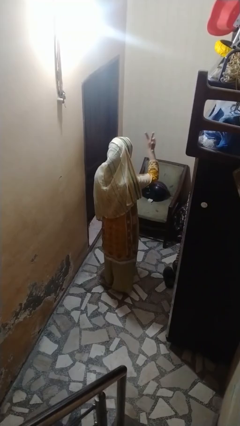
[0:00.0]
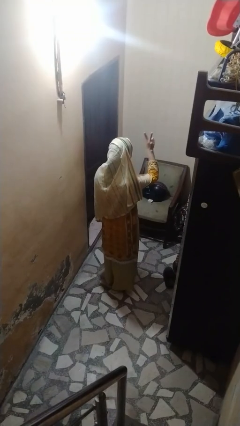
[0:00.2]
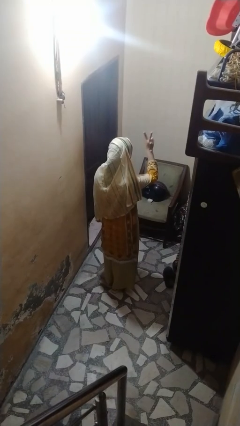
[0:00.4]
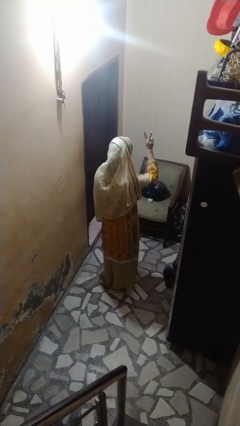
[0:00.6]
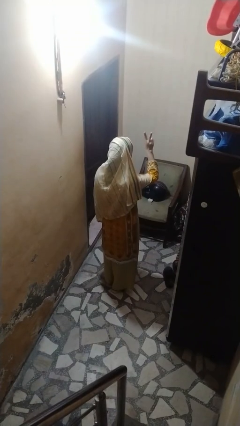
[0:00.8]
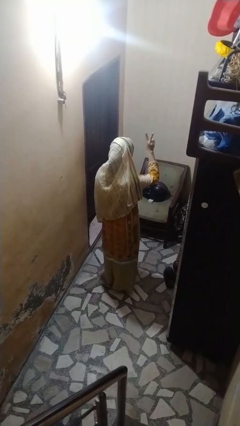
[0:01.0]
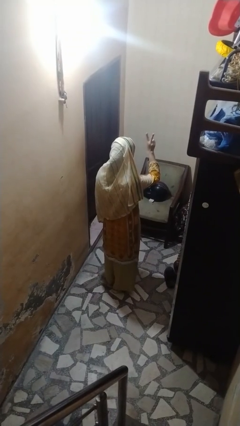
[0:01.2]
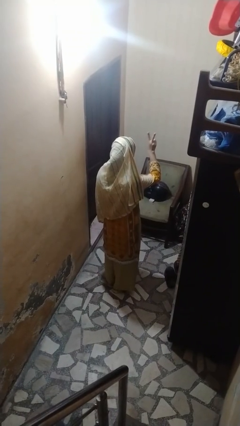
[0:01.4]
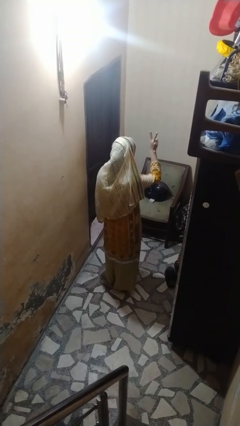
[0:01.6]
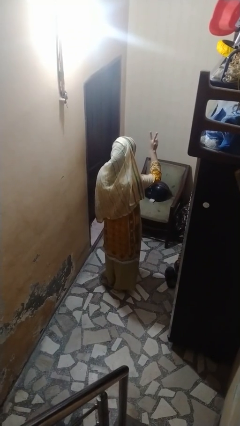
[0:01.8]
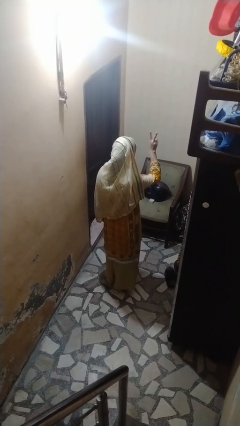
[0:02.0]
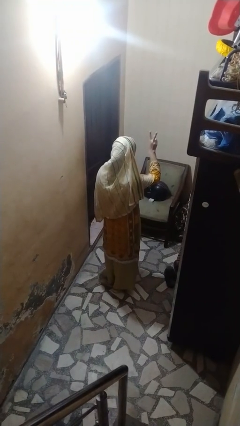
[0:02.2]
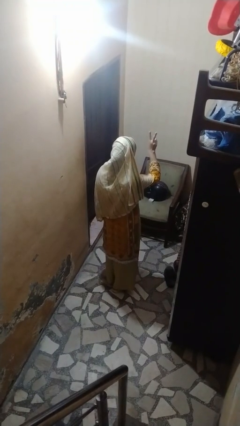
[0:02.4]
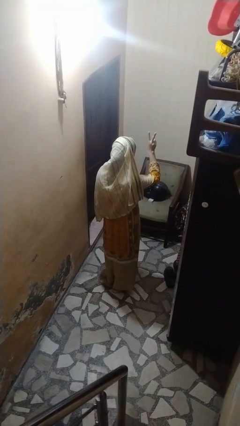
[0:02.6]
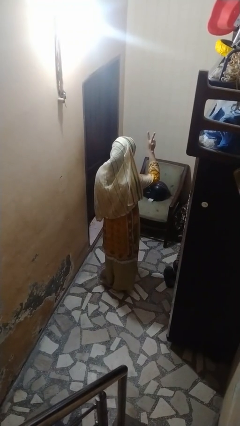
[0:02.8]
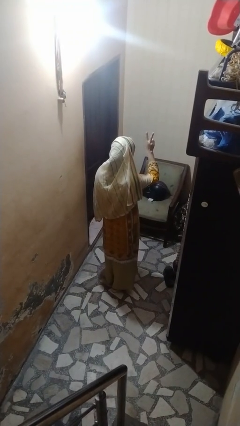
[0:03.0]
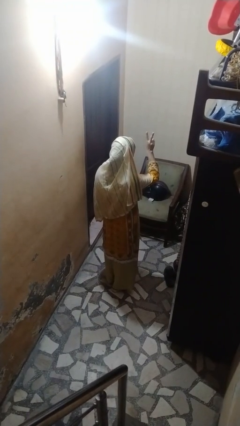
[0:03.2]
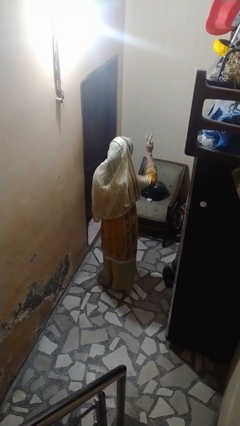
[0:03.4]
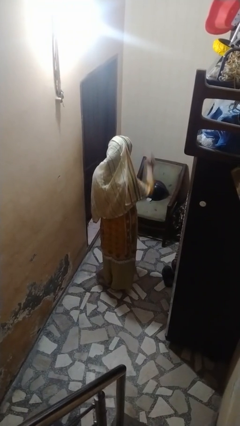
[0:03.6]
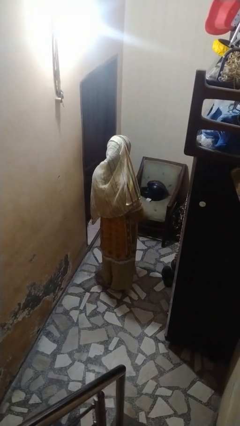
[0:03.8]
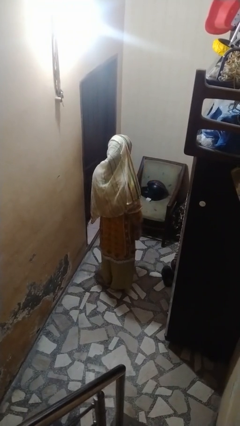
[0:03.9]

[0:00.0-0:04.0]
person gestures peace

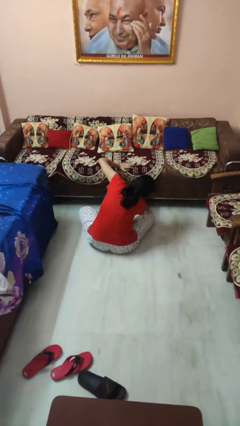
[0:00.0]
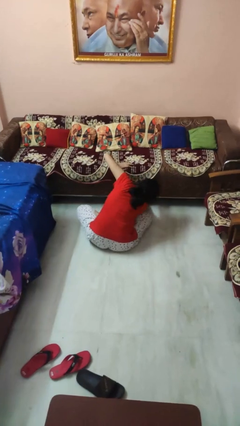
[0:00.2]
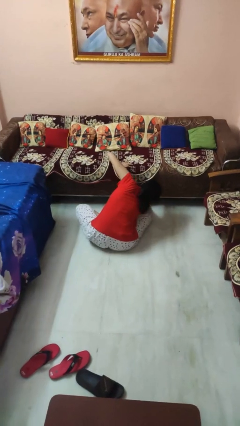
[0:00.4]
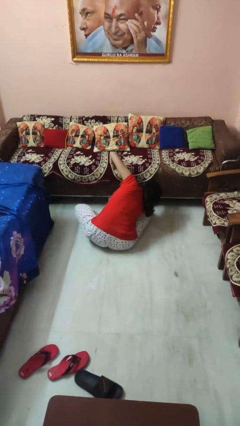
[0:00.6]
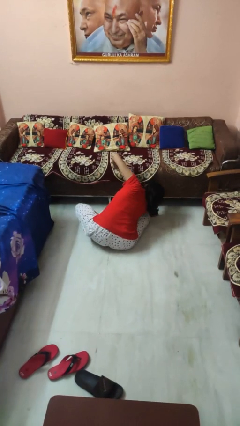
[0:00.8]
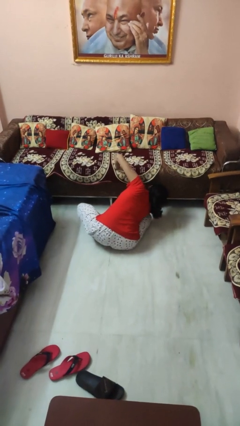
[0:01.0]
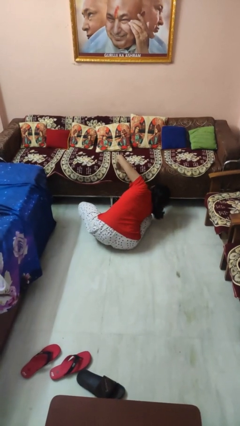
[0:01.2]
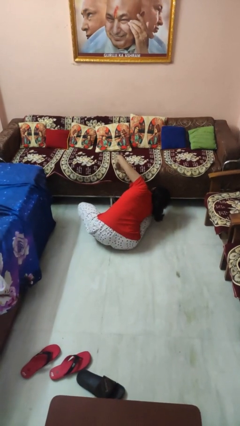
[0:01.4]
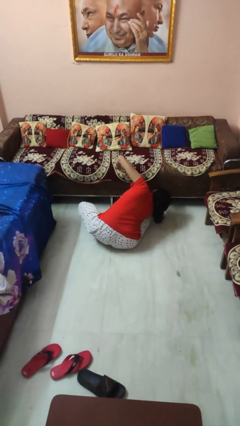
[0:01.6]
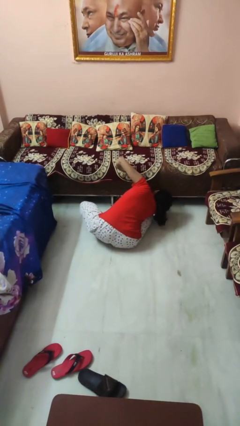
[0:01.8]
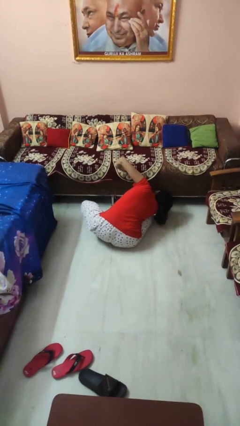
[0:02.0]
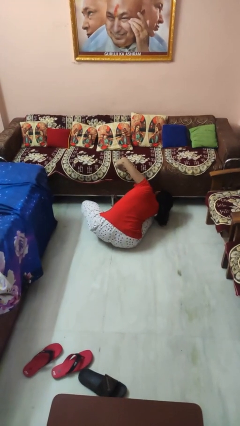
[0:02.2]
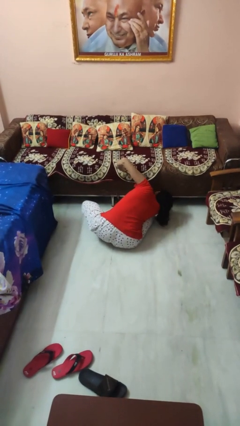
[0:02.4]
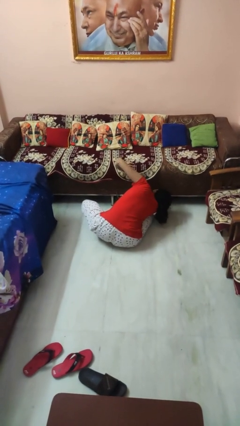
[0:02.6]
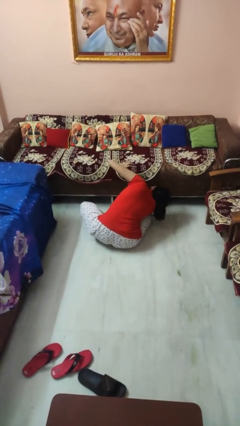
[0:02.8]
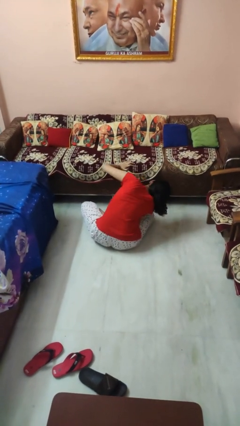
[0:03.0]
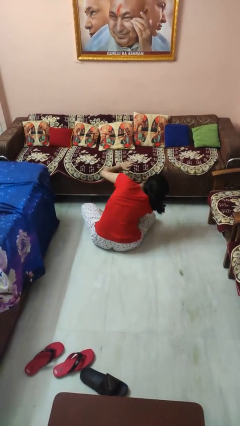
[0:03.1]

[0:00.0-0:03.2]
person searches under couch

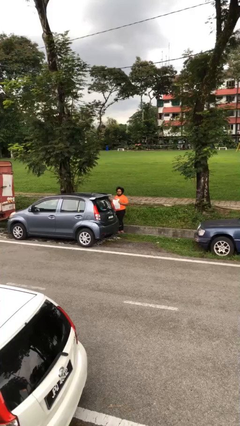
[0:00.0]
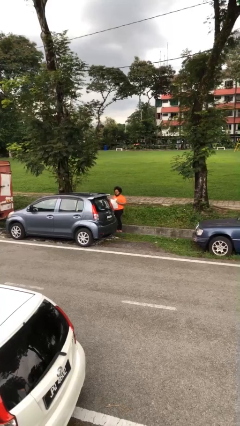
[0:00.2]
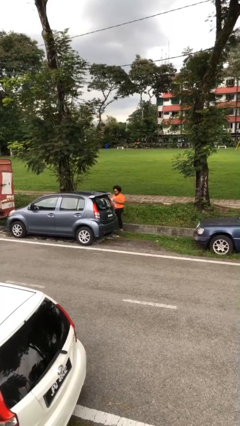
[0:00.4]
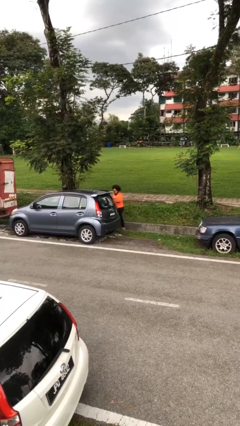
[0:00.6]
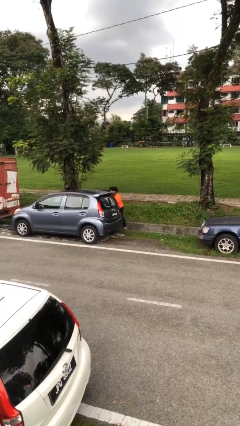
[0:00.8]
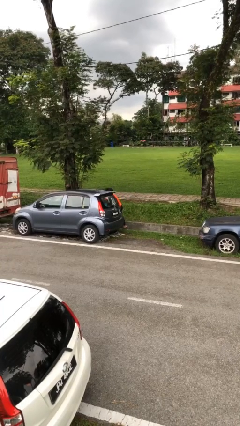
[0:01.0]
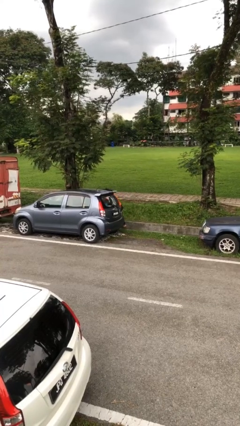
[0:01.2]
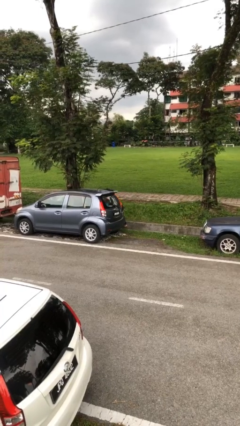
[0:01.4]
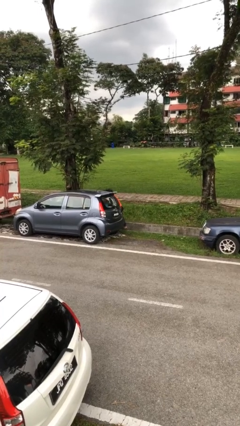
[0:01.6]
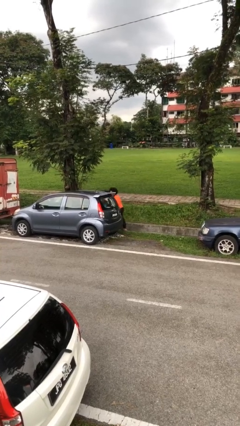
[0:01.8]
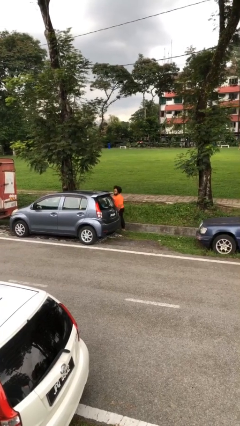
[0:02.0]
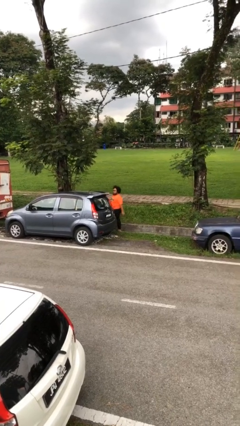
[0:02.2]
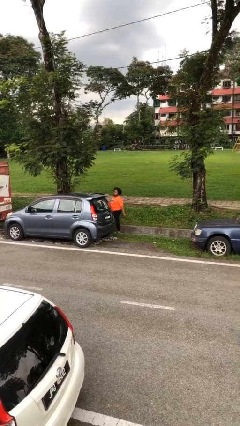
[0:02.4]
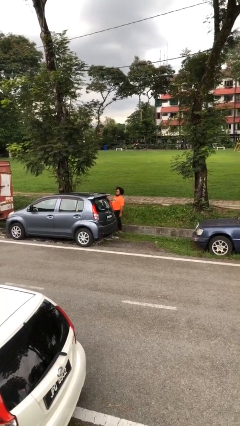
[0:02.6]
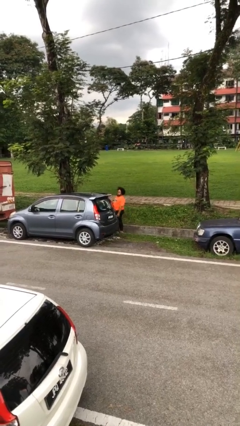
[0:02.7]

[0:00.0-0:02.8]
person loads car

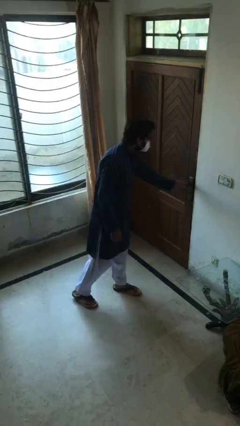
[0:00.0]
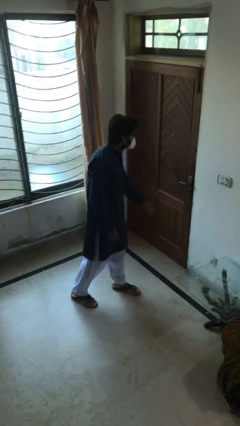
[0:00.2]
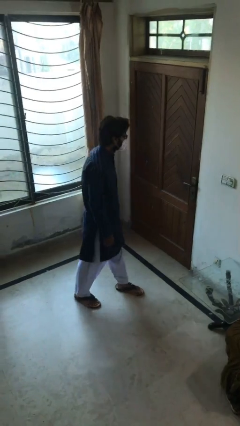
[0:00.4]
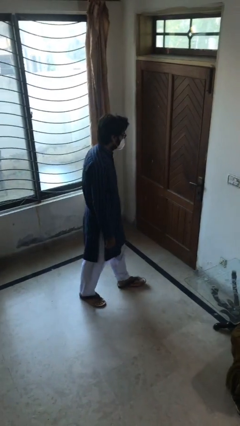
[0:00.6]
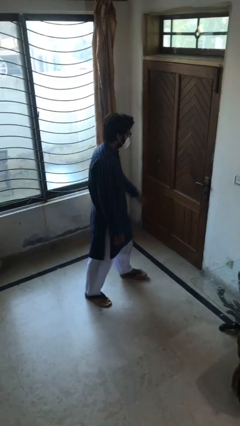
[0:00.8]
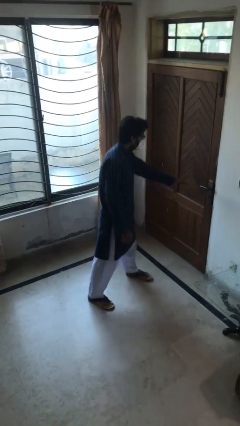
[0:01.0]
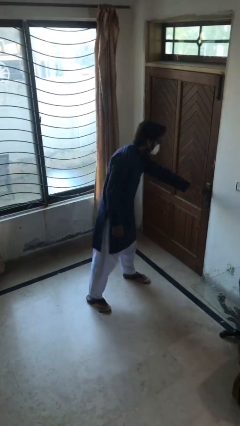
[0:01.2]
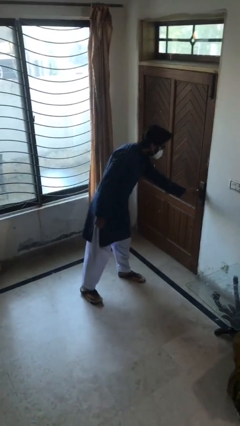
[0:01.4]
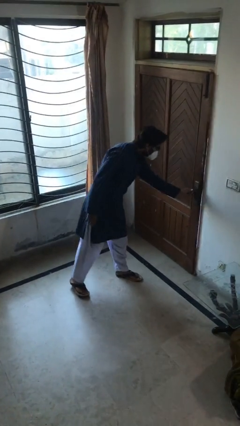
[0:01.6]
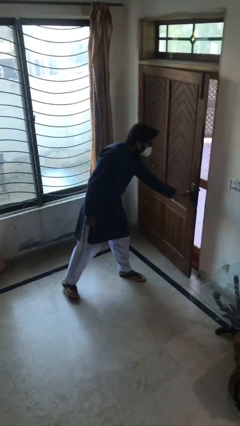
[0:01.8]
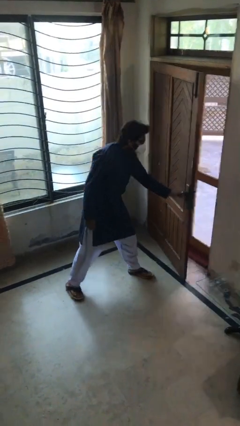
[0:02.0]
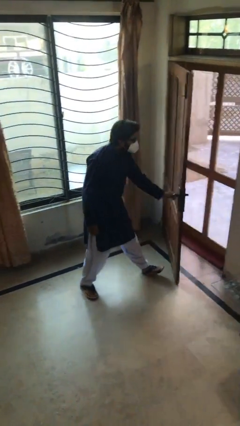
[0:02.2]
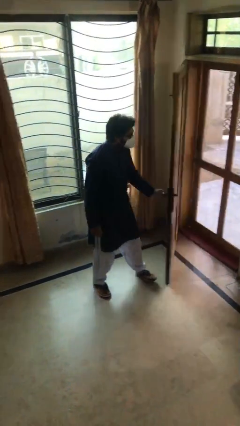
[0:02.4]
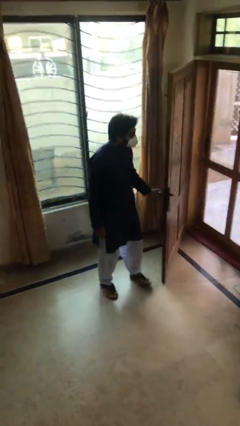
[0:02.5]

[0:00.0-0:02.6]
person opens facility door

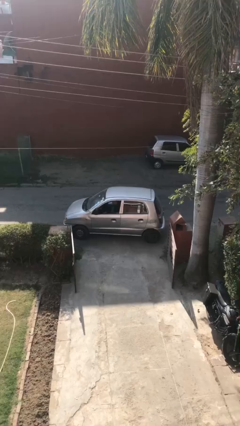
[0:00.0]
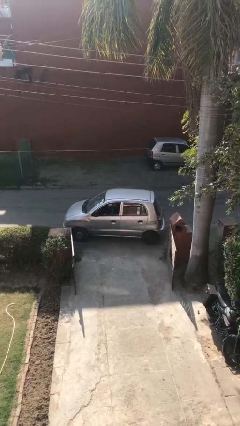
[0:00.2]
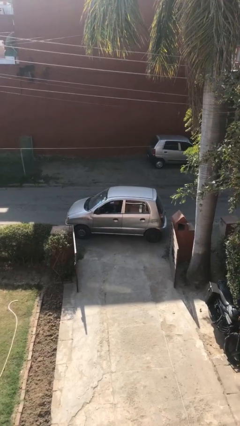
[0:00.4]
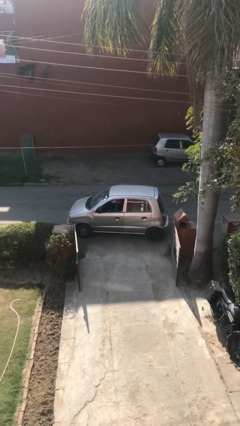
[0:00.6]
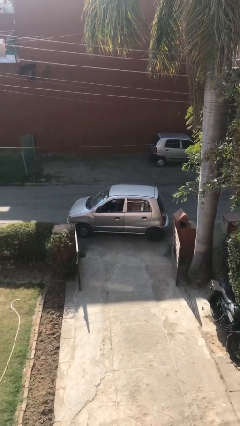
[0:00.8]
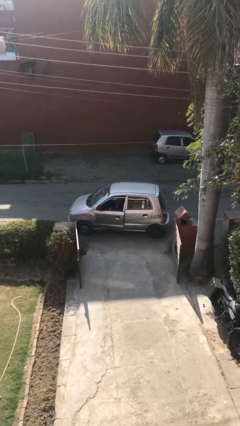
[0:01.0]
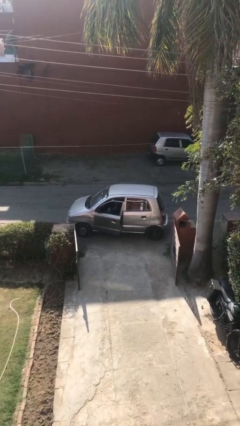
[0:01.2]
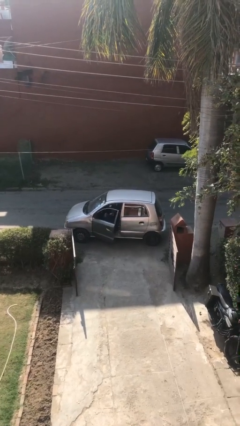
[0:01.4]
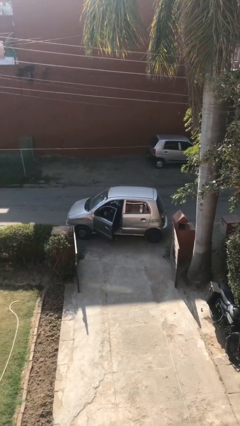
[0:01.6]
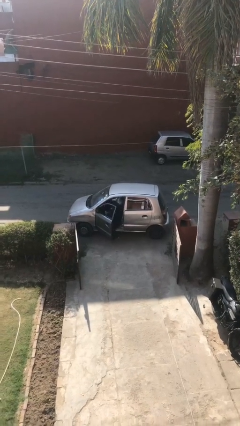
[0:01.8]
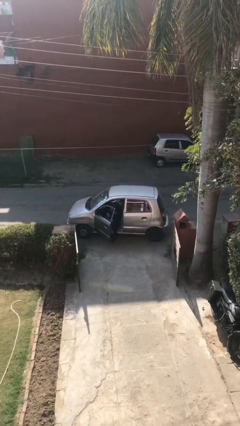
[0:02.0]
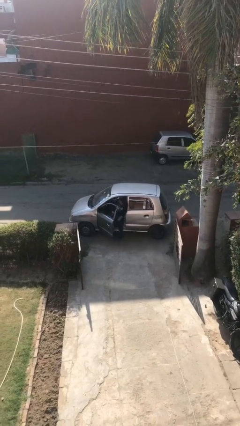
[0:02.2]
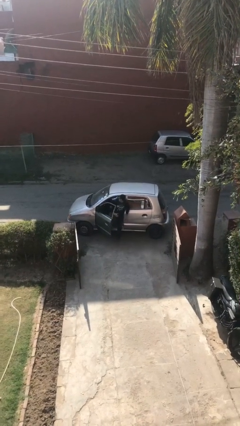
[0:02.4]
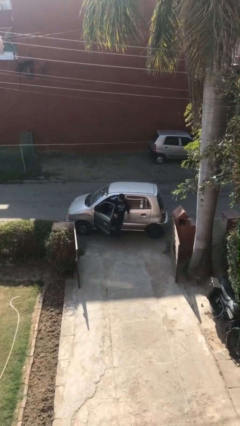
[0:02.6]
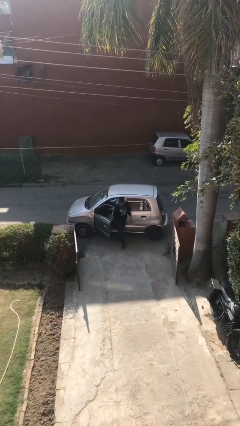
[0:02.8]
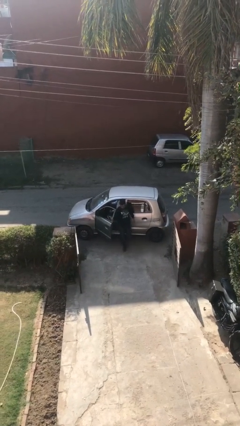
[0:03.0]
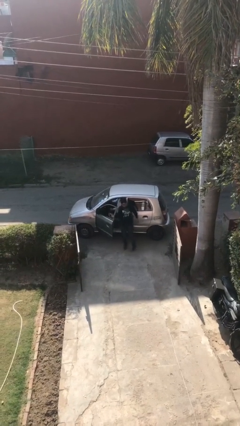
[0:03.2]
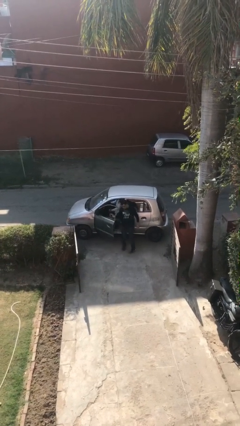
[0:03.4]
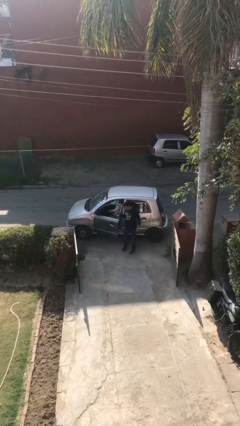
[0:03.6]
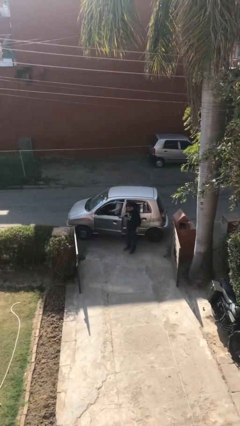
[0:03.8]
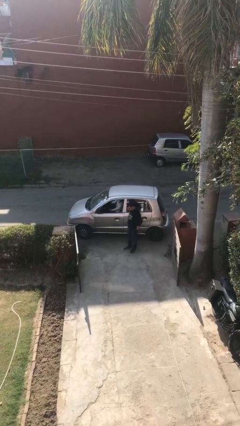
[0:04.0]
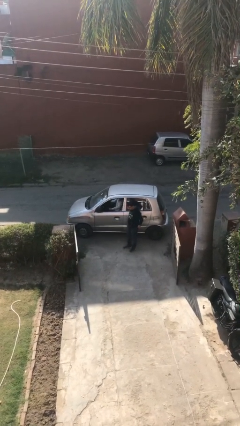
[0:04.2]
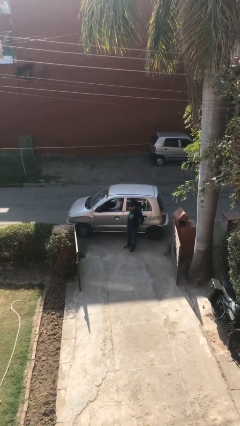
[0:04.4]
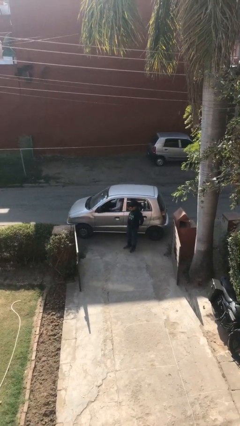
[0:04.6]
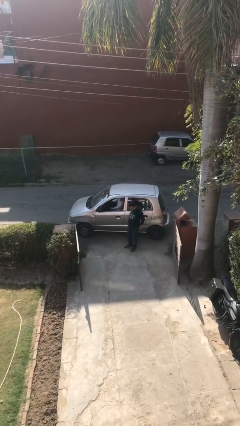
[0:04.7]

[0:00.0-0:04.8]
car drops off person

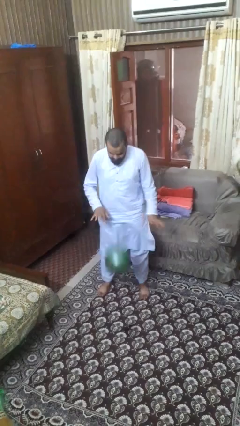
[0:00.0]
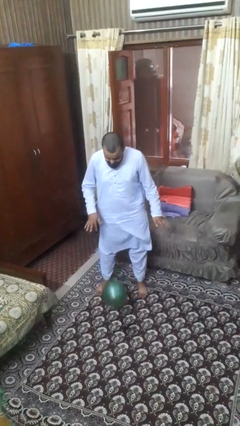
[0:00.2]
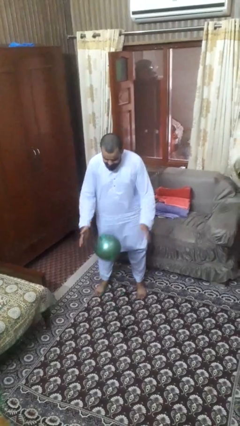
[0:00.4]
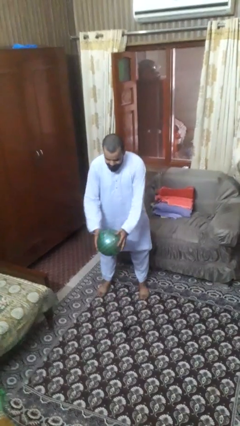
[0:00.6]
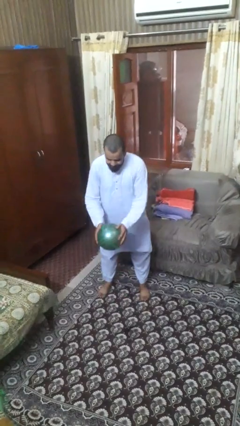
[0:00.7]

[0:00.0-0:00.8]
person bounces ball on floor
